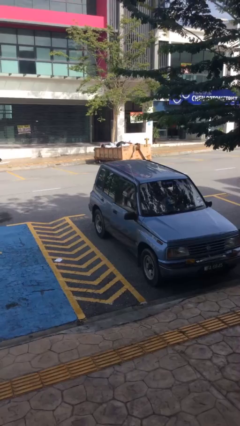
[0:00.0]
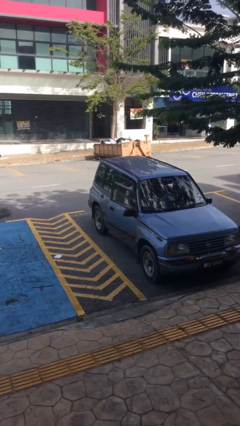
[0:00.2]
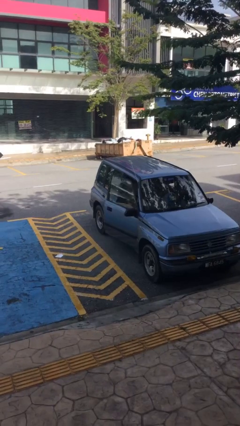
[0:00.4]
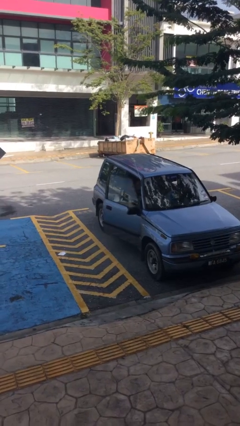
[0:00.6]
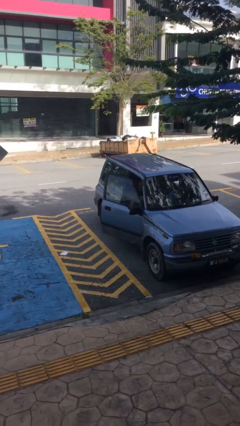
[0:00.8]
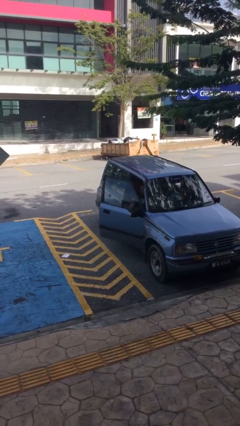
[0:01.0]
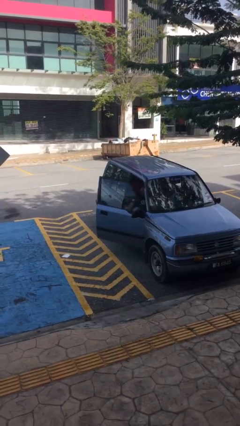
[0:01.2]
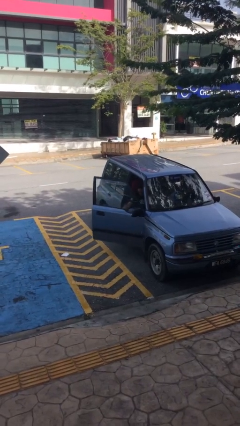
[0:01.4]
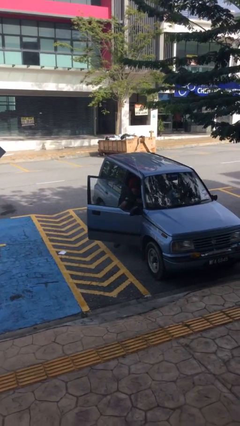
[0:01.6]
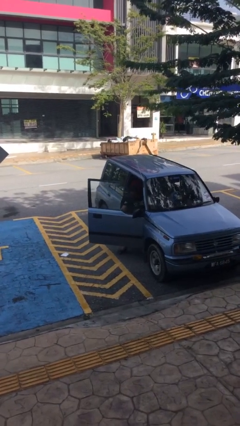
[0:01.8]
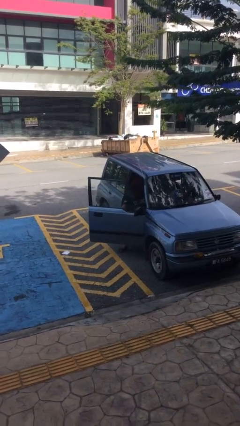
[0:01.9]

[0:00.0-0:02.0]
person opens car door

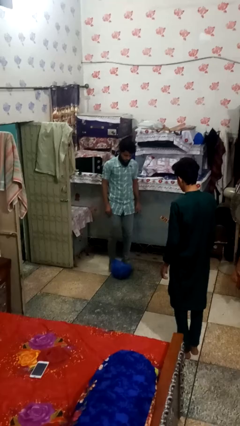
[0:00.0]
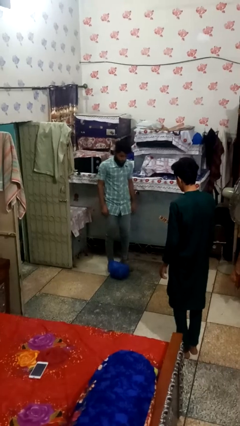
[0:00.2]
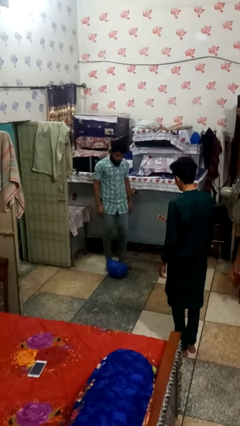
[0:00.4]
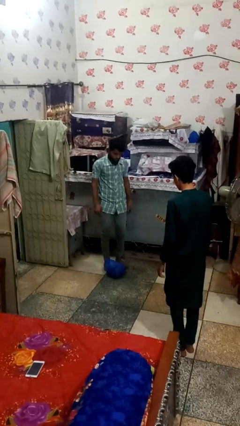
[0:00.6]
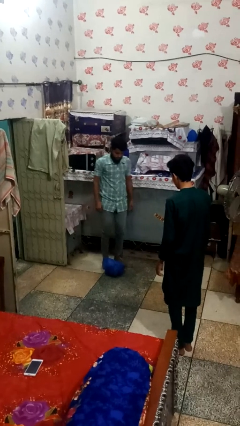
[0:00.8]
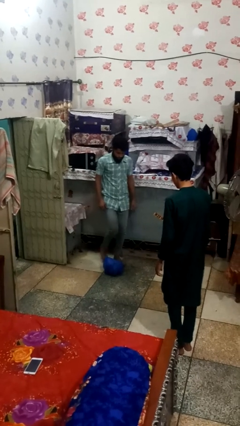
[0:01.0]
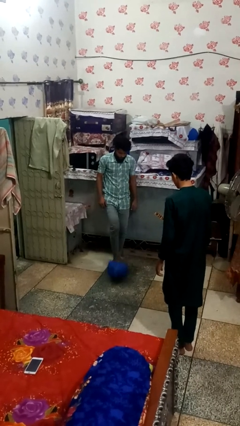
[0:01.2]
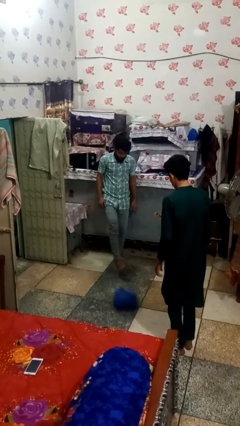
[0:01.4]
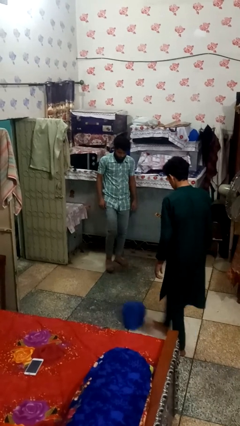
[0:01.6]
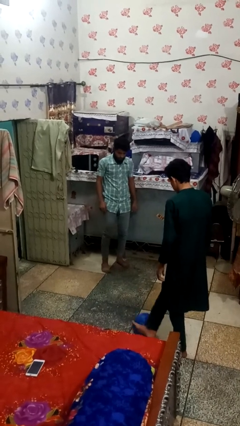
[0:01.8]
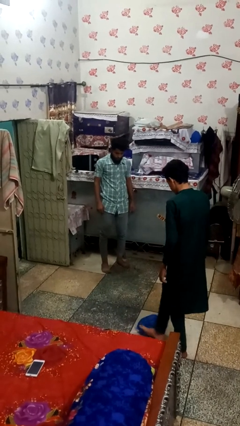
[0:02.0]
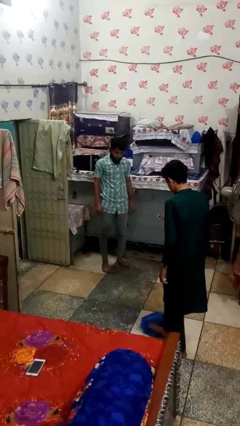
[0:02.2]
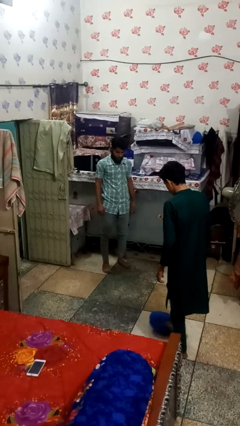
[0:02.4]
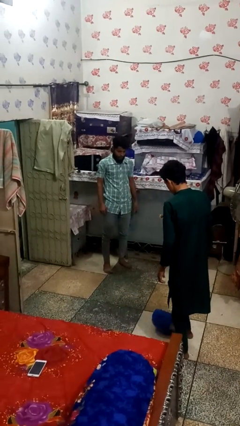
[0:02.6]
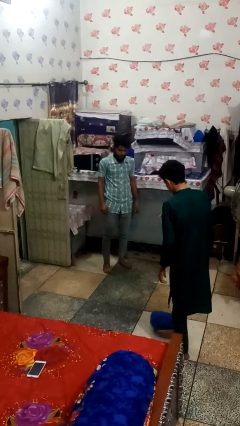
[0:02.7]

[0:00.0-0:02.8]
person kicks object to person

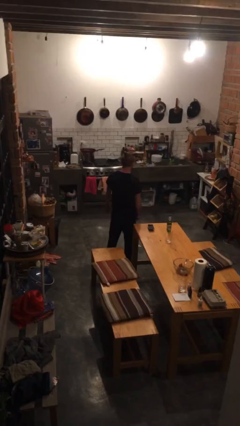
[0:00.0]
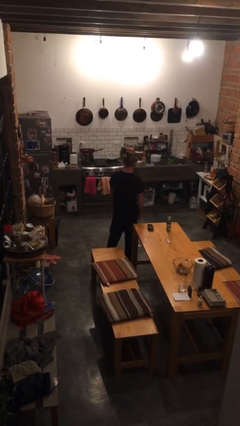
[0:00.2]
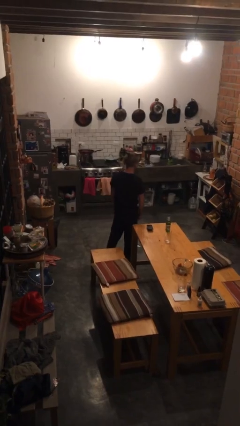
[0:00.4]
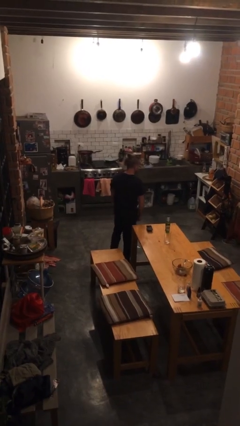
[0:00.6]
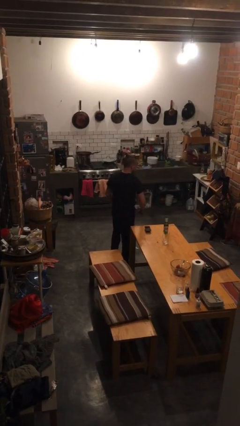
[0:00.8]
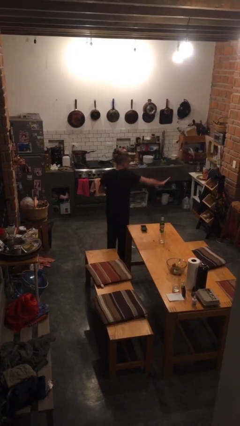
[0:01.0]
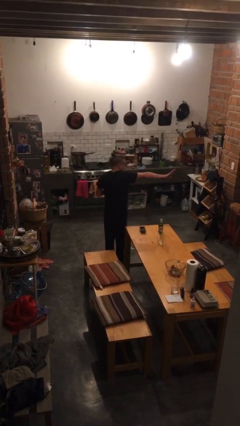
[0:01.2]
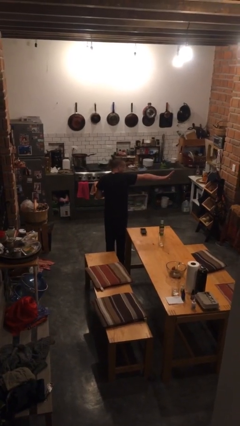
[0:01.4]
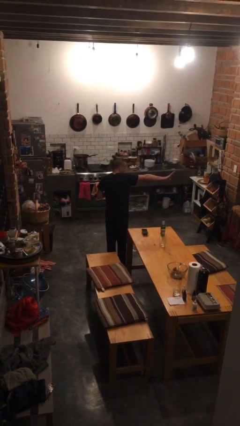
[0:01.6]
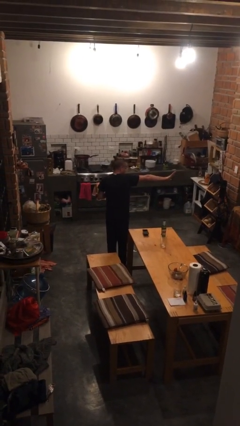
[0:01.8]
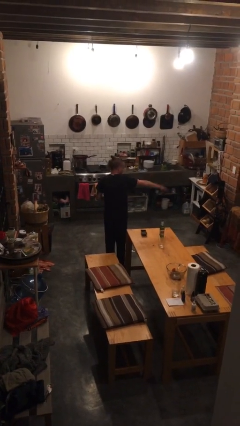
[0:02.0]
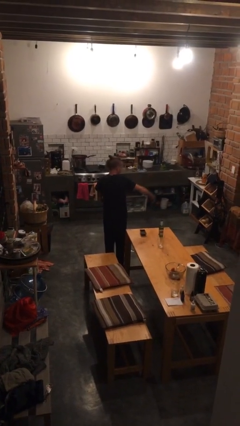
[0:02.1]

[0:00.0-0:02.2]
person gestures stop

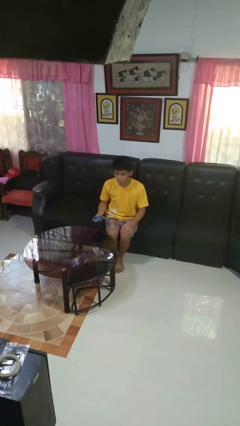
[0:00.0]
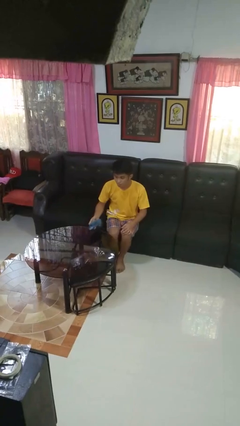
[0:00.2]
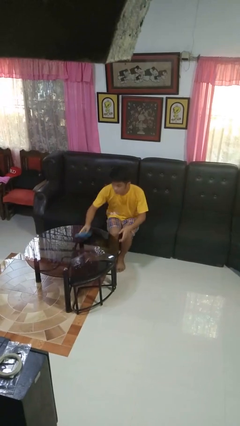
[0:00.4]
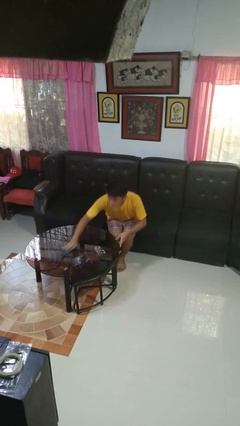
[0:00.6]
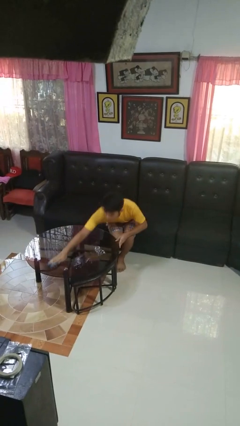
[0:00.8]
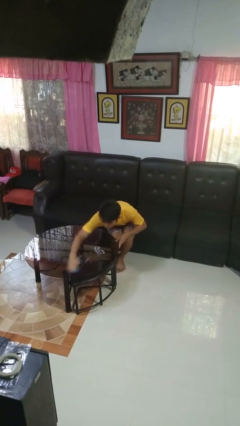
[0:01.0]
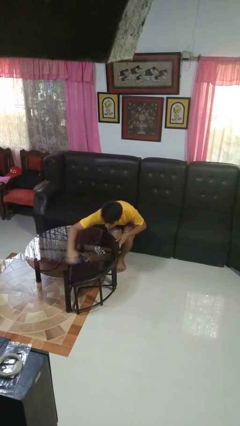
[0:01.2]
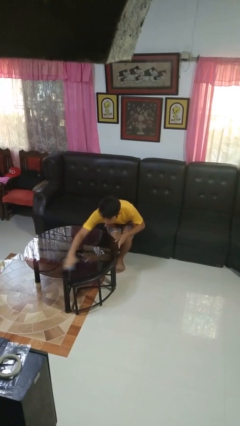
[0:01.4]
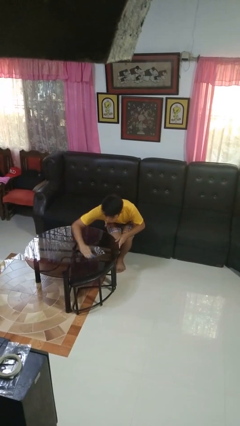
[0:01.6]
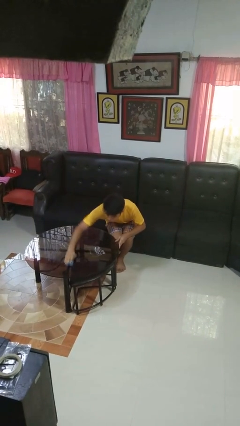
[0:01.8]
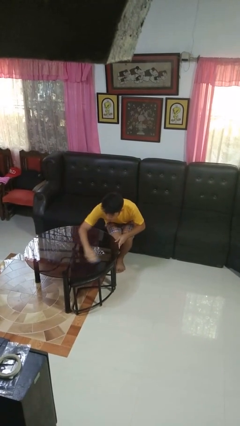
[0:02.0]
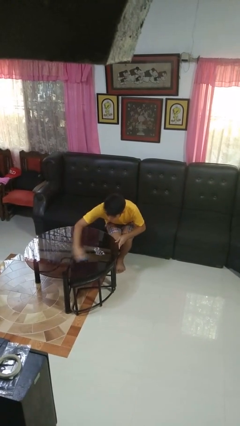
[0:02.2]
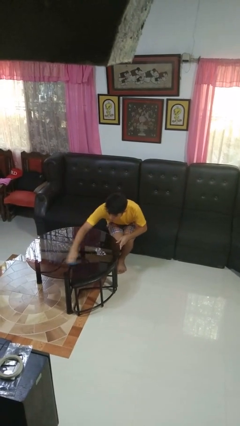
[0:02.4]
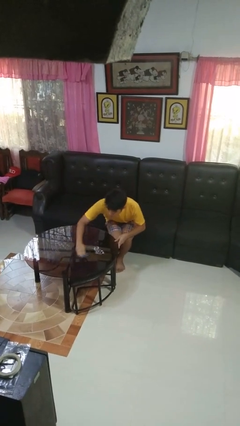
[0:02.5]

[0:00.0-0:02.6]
person cleans table with rag

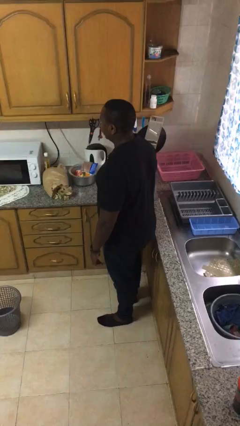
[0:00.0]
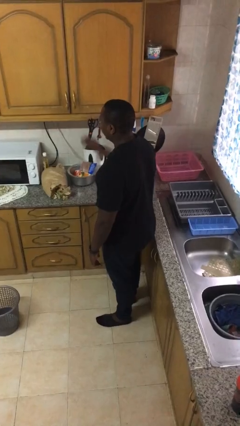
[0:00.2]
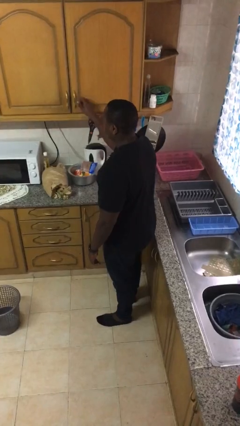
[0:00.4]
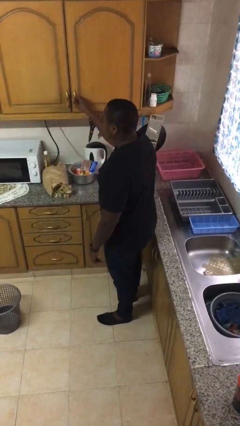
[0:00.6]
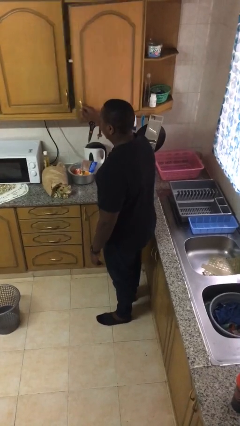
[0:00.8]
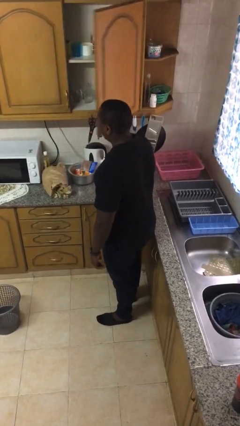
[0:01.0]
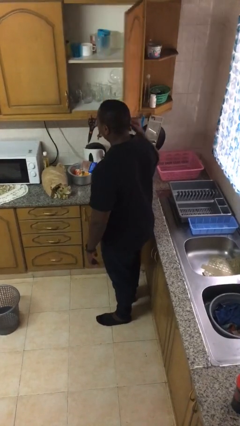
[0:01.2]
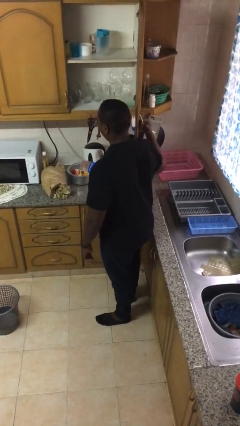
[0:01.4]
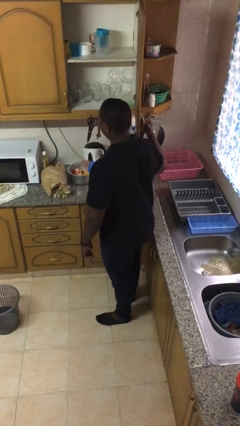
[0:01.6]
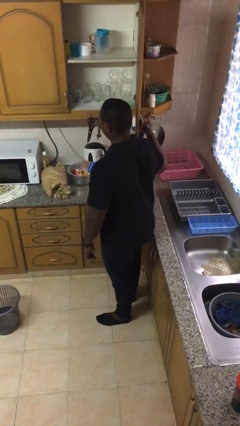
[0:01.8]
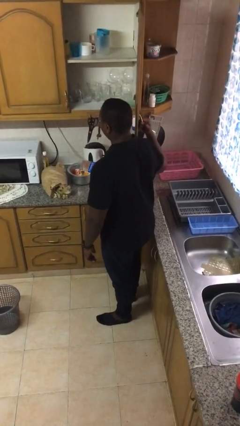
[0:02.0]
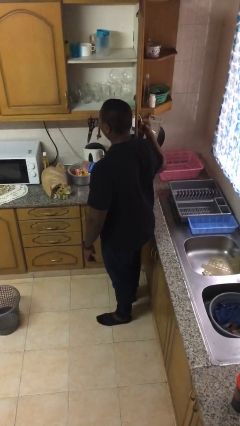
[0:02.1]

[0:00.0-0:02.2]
person opens cabinet

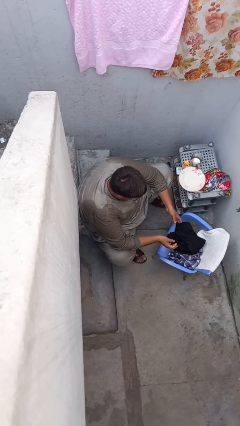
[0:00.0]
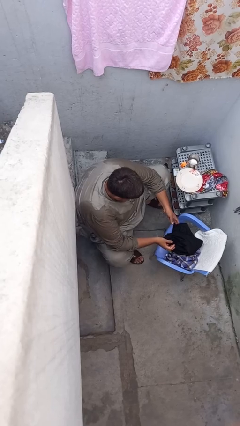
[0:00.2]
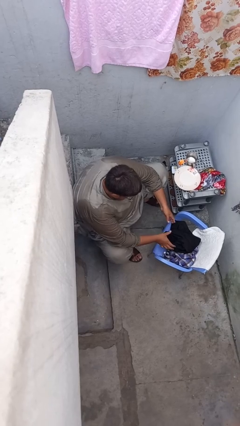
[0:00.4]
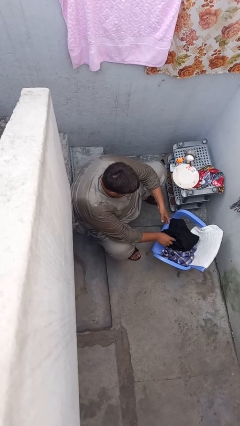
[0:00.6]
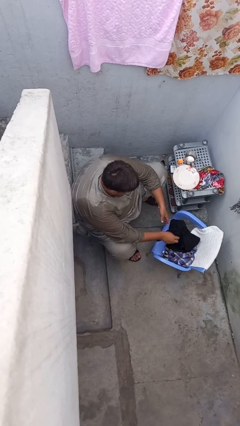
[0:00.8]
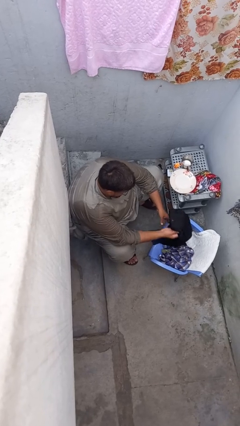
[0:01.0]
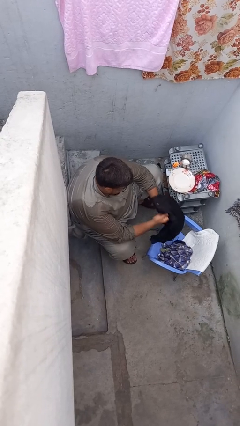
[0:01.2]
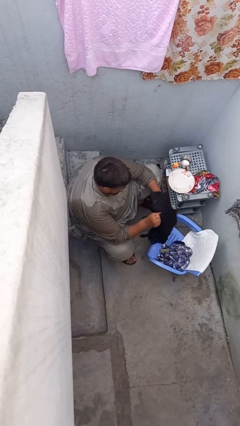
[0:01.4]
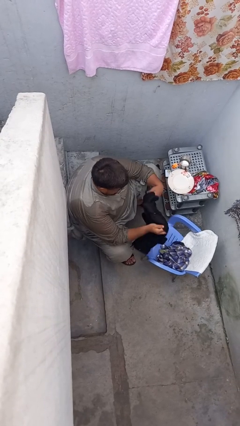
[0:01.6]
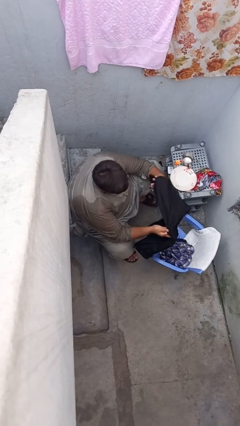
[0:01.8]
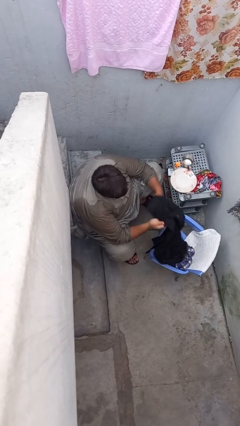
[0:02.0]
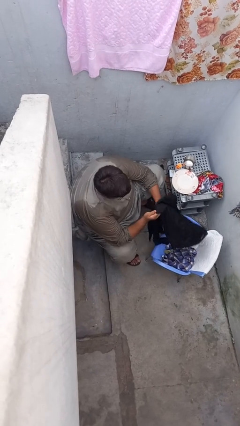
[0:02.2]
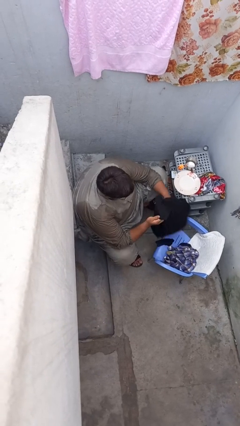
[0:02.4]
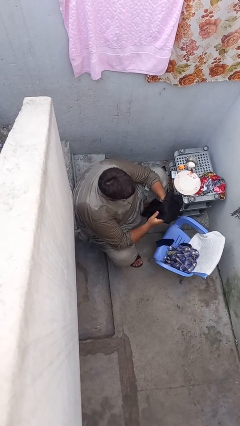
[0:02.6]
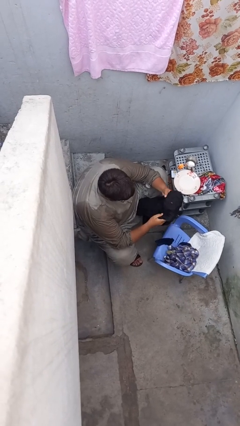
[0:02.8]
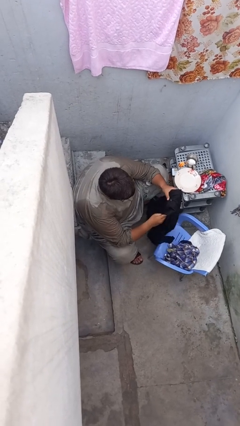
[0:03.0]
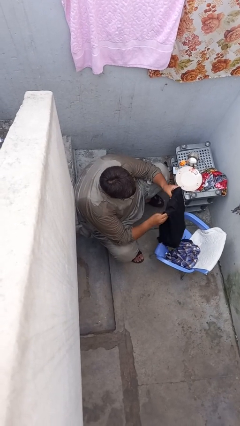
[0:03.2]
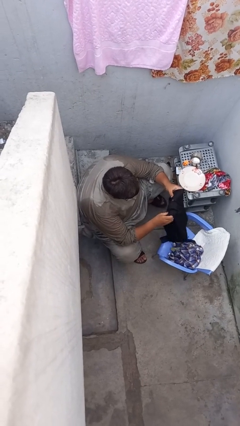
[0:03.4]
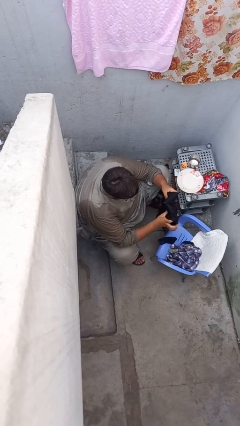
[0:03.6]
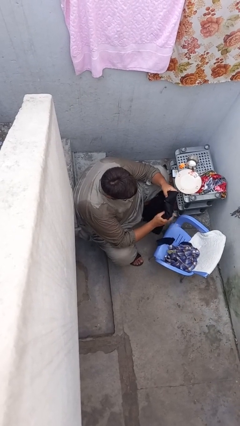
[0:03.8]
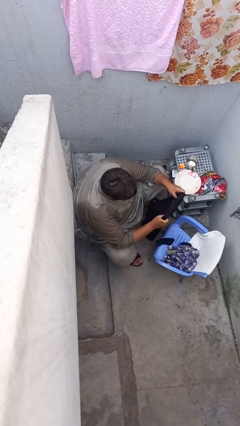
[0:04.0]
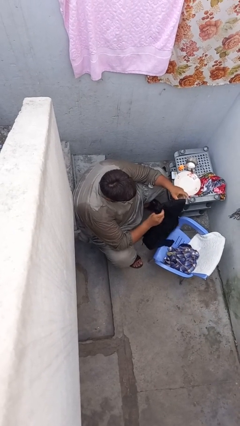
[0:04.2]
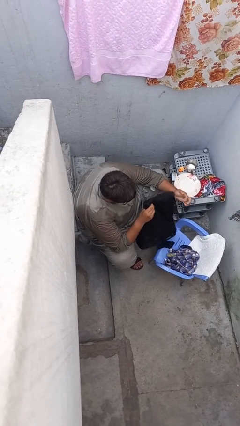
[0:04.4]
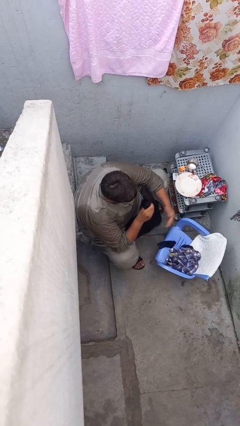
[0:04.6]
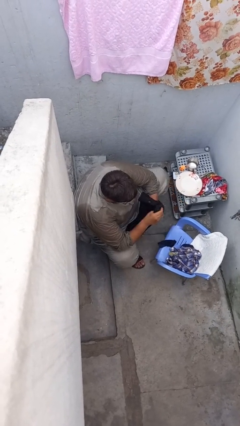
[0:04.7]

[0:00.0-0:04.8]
person folds pants

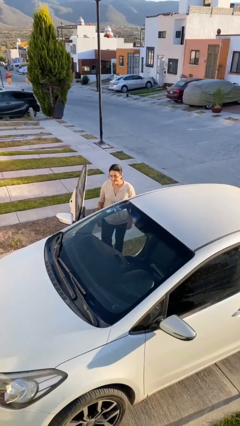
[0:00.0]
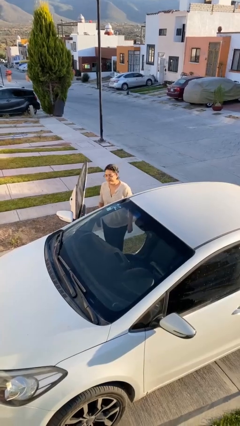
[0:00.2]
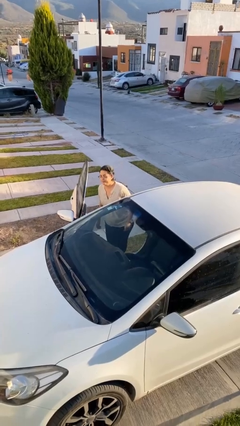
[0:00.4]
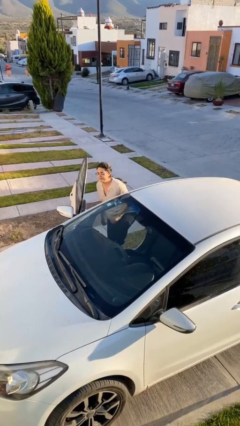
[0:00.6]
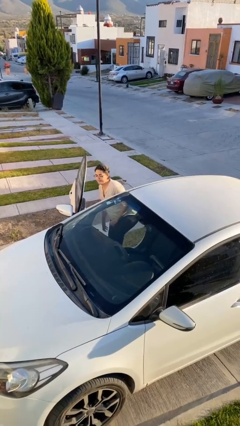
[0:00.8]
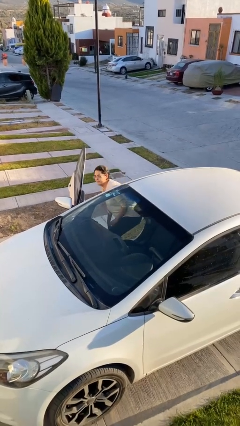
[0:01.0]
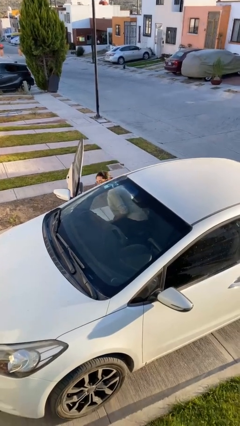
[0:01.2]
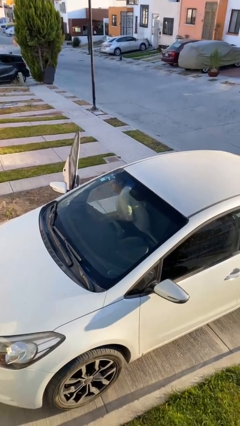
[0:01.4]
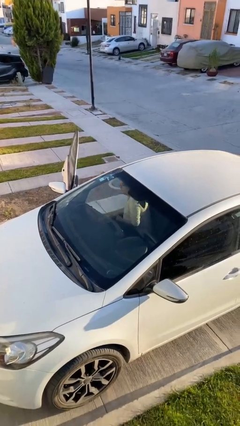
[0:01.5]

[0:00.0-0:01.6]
person enters car
